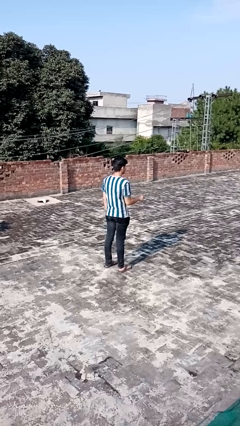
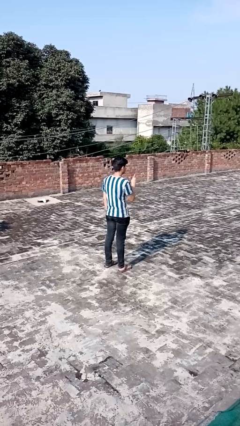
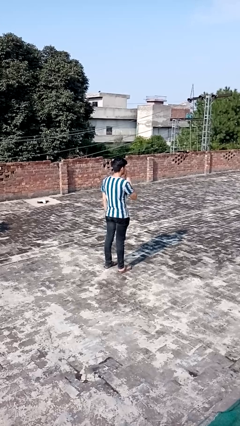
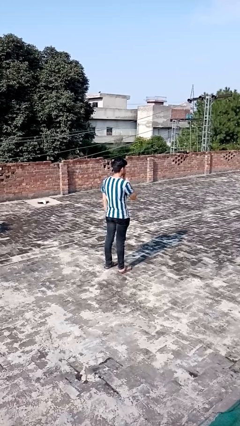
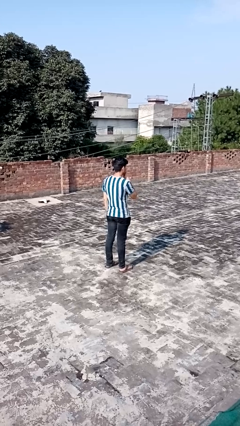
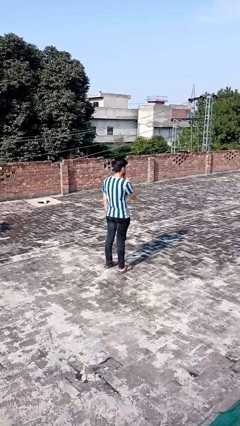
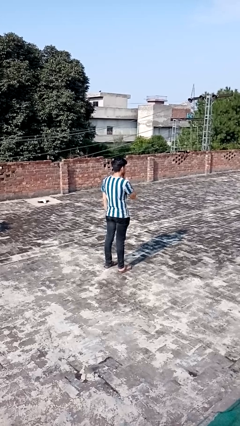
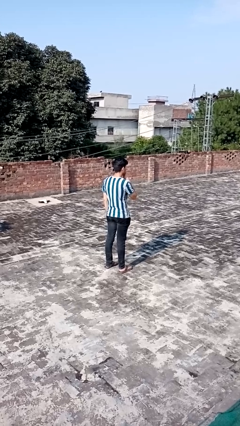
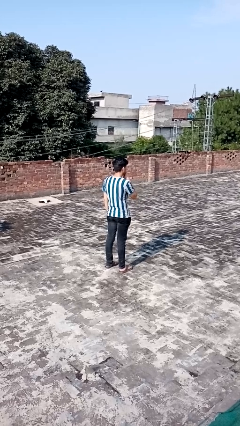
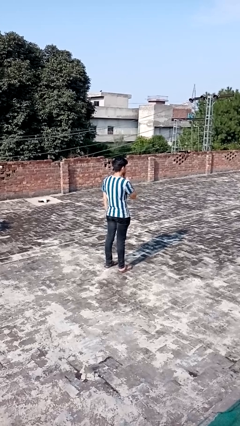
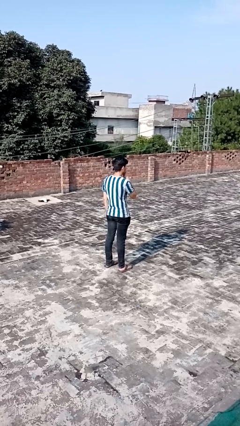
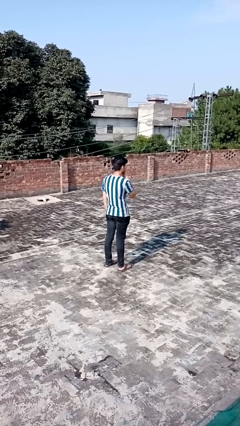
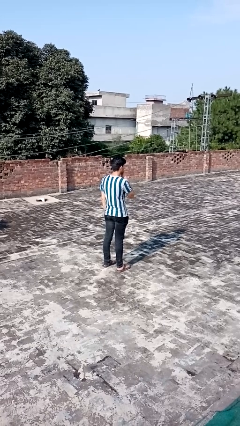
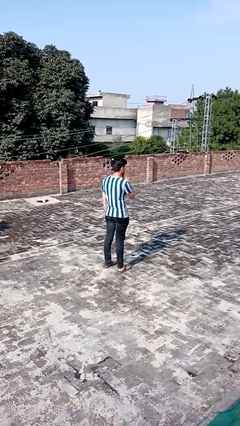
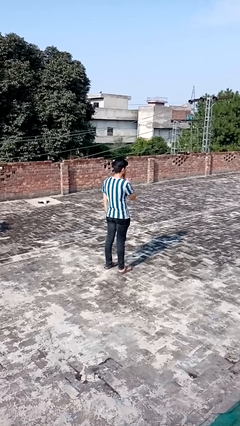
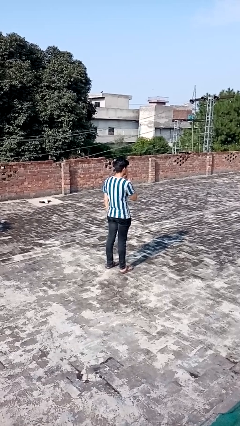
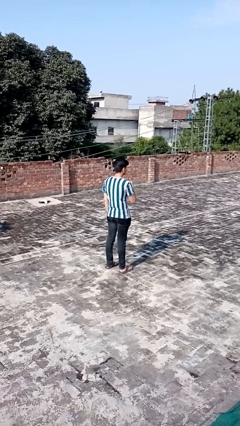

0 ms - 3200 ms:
person gestures be quiet

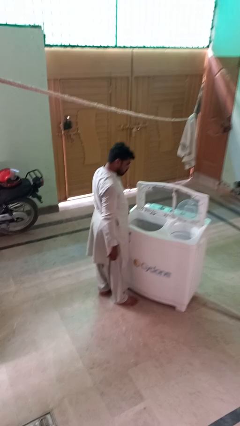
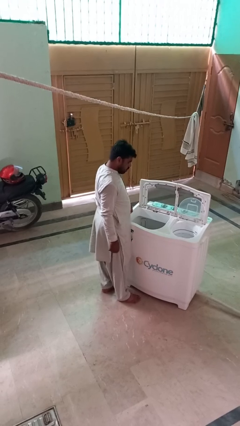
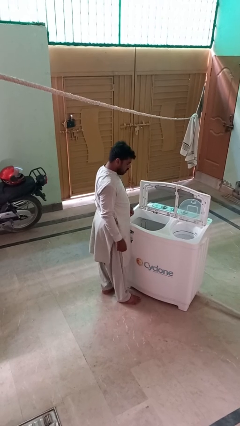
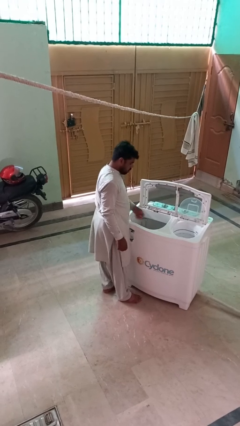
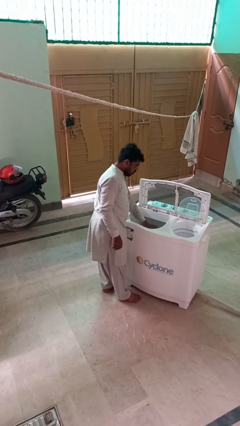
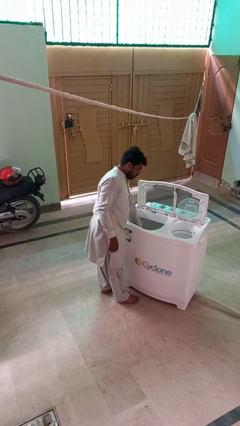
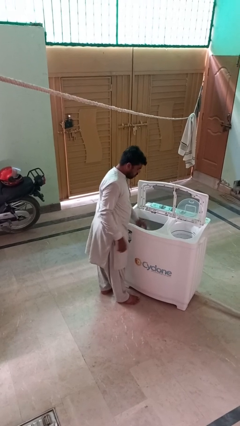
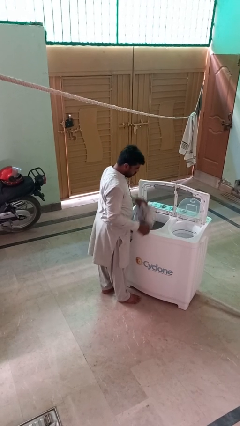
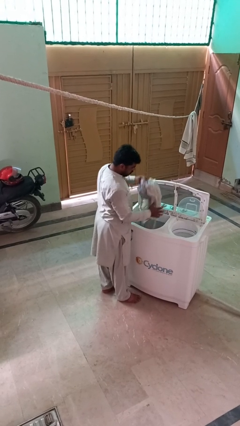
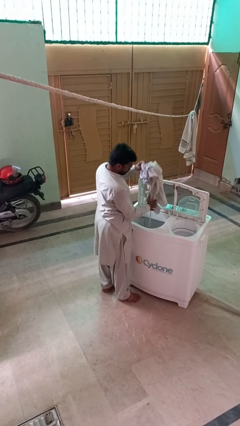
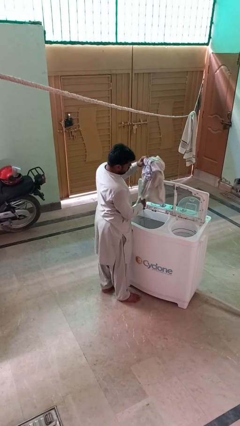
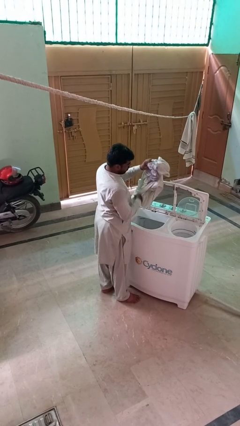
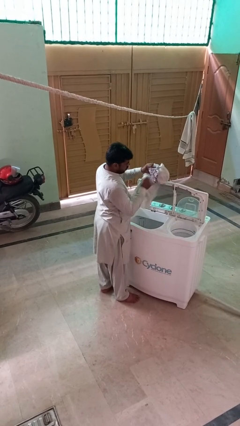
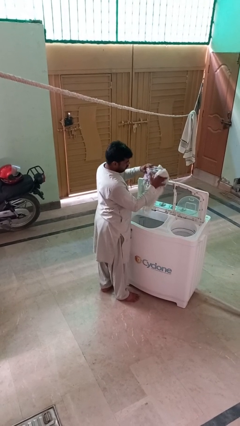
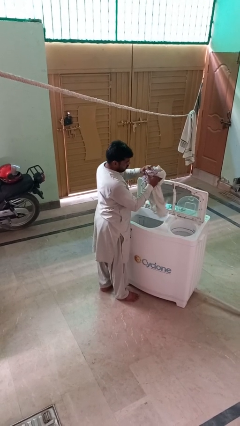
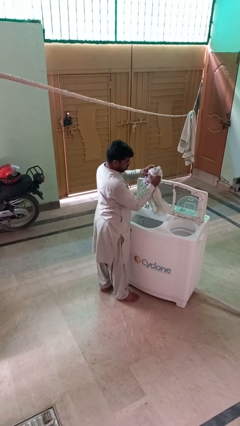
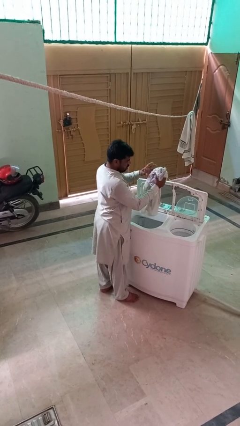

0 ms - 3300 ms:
person unloads clotheswasher

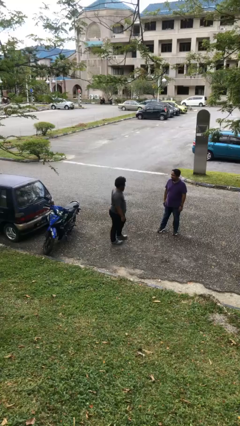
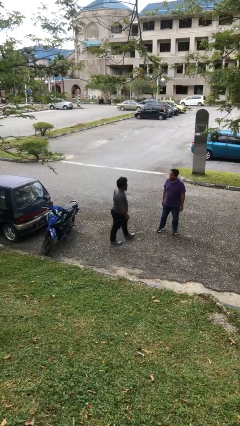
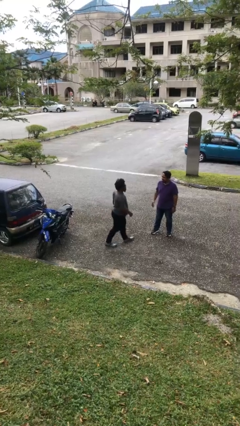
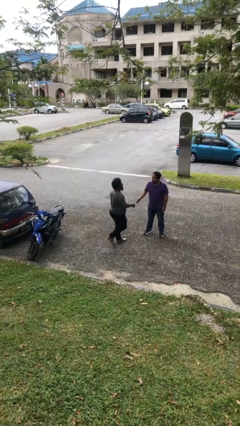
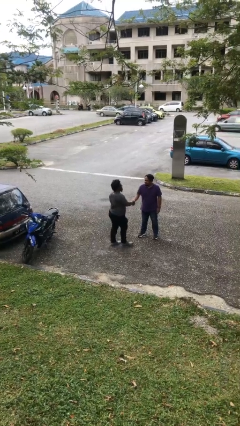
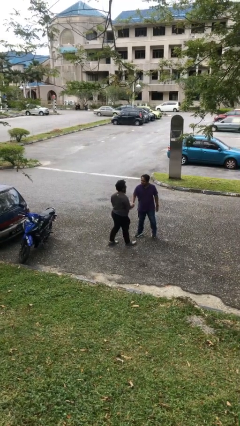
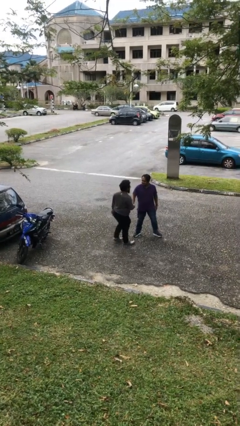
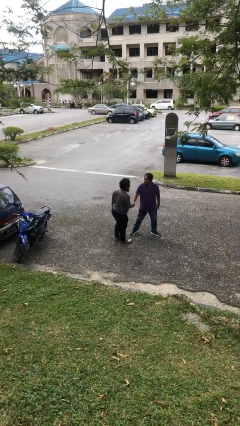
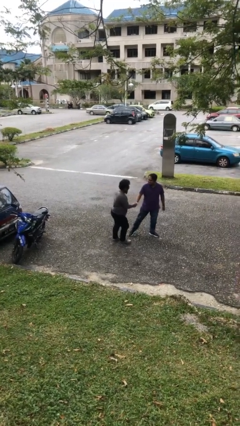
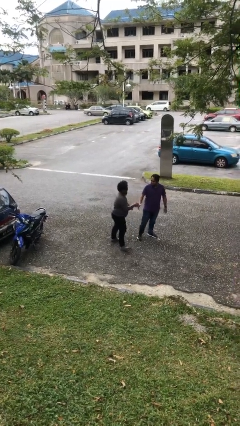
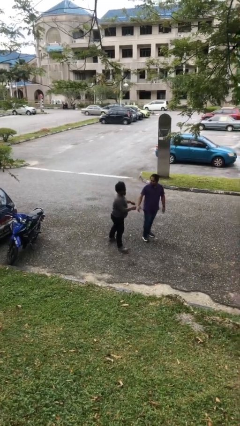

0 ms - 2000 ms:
person shakes hand

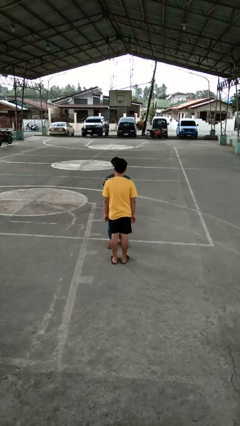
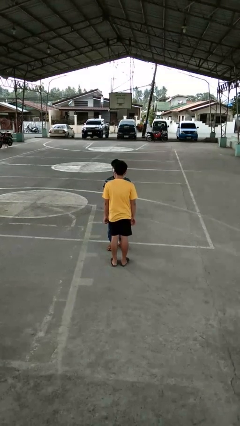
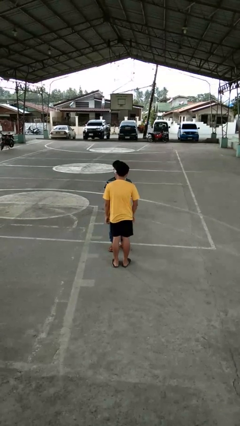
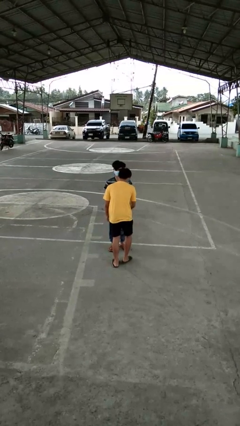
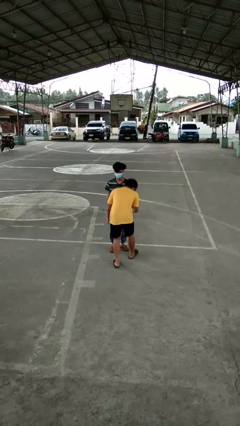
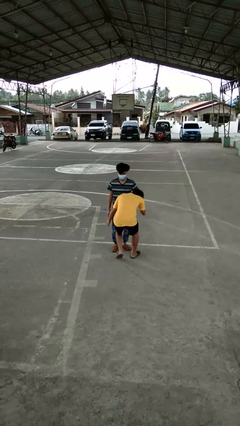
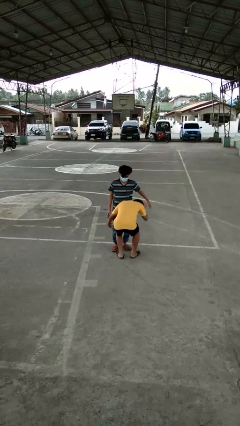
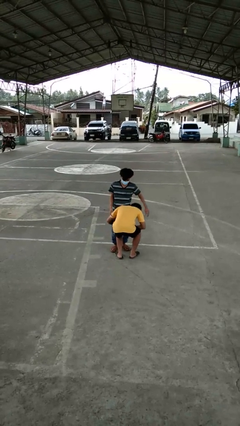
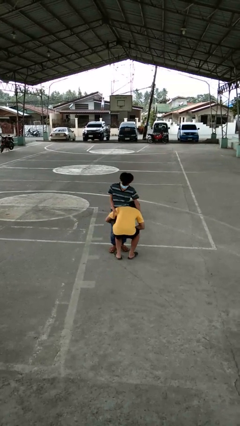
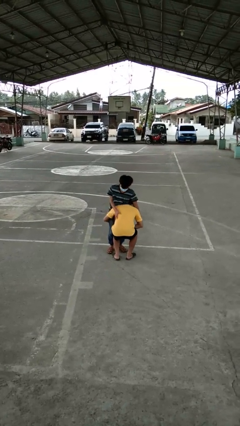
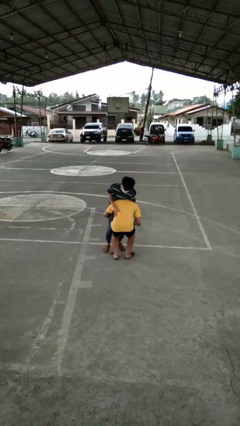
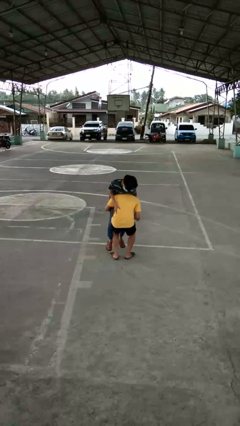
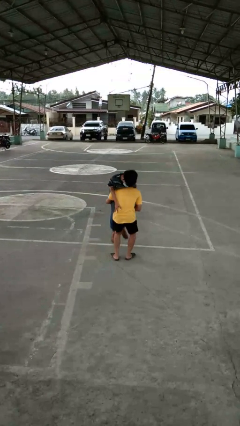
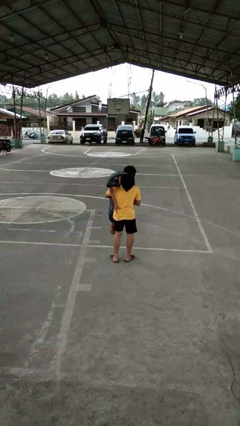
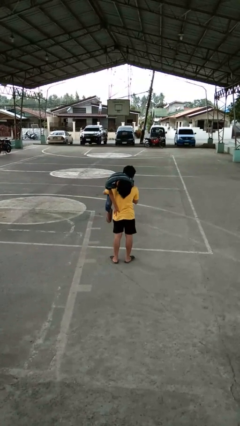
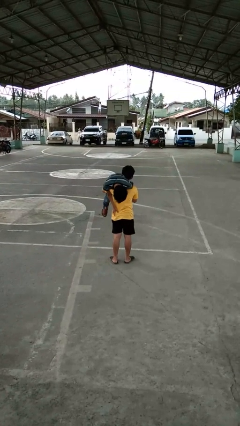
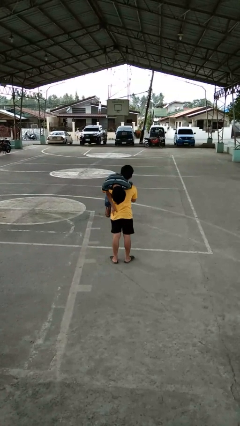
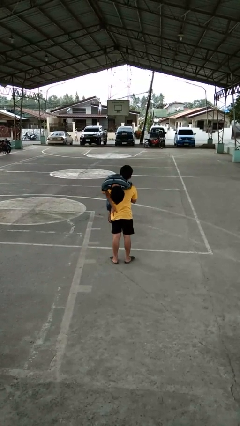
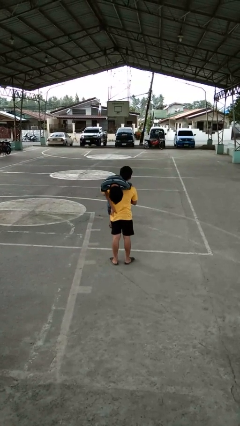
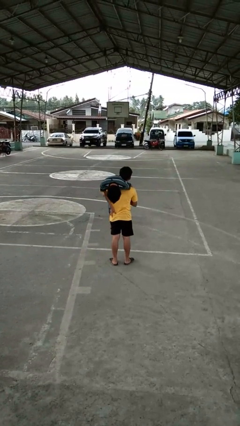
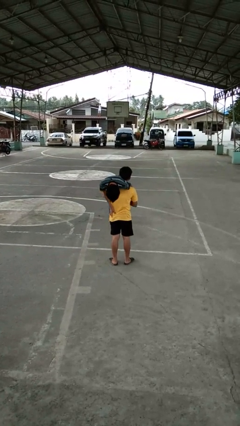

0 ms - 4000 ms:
person carries person over shoulder

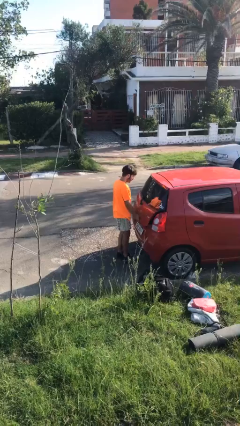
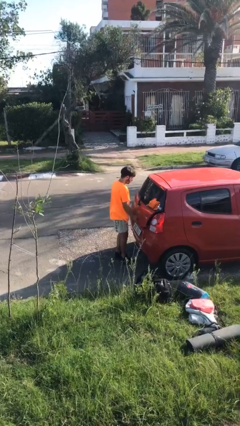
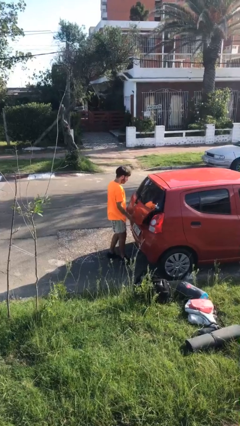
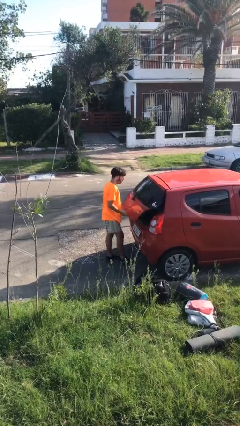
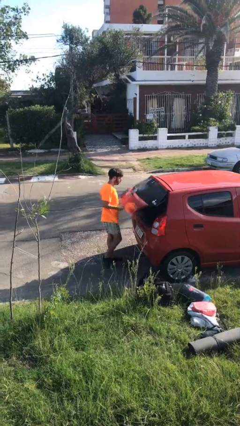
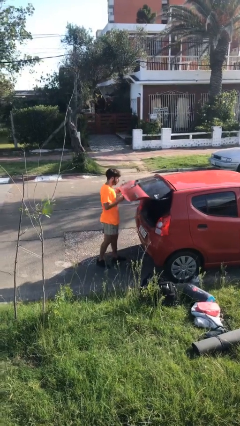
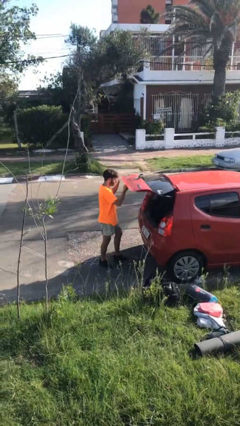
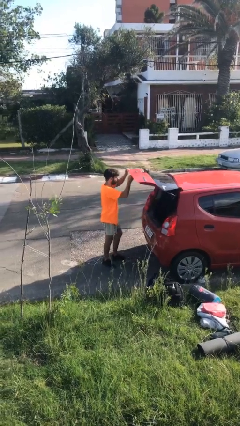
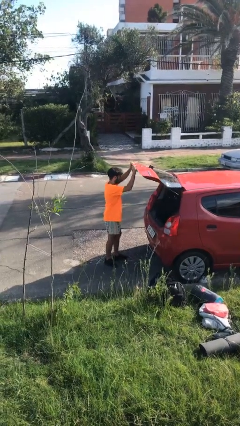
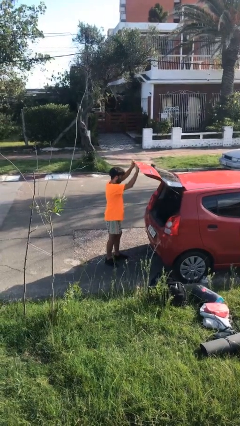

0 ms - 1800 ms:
person opens car trunk

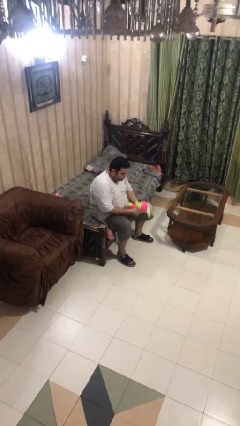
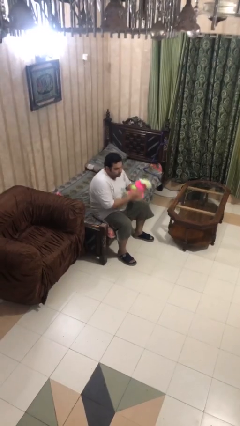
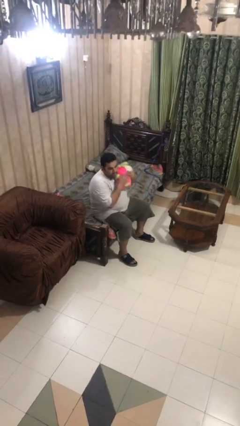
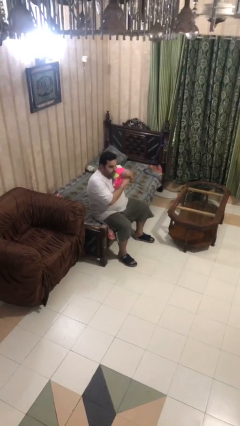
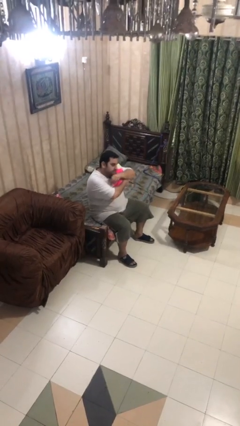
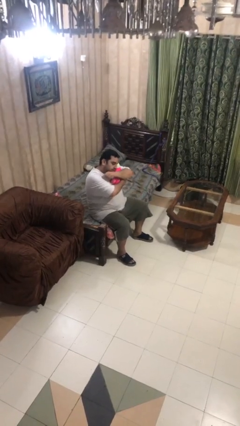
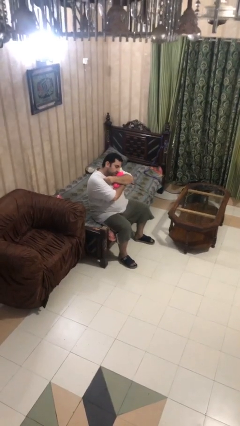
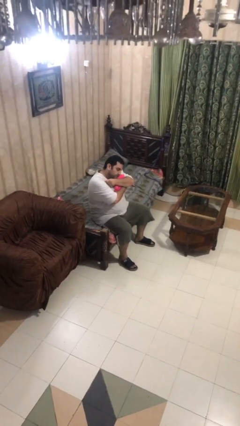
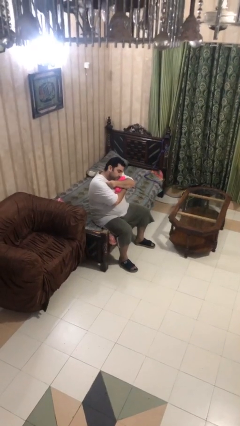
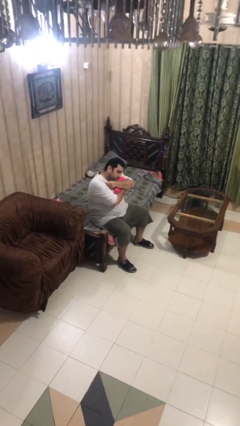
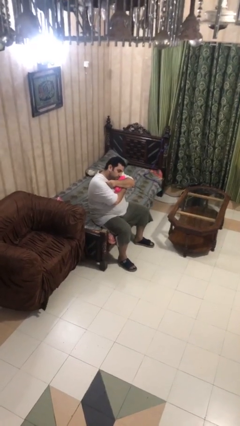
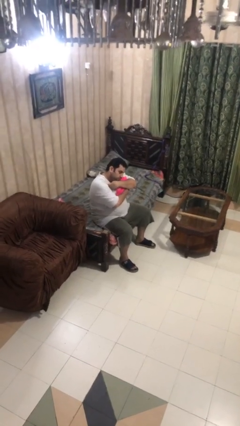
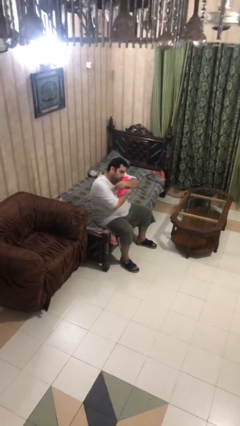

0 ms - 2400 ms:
person hugs stuffed animal

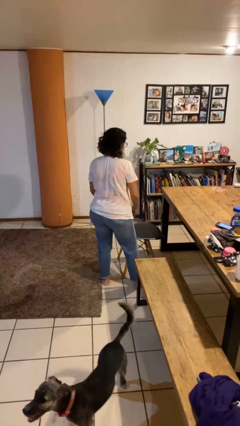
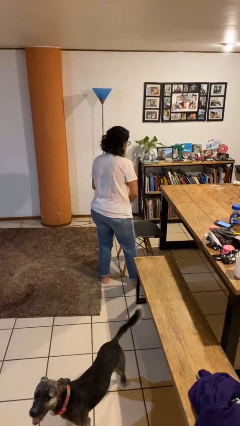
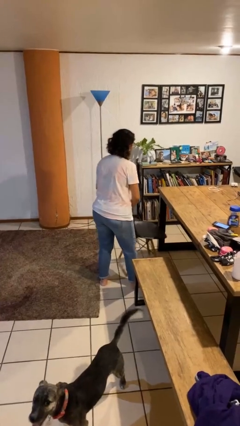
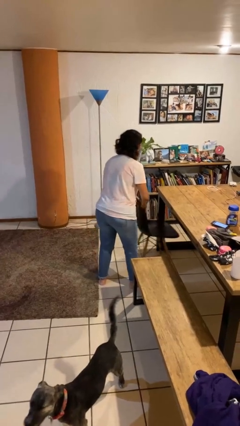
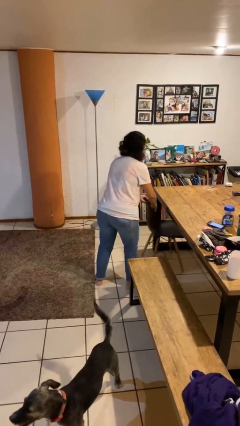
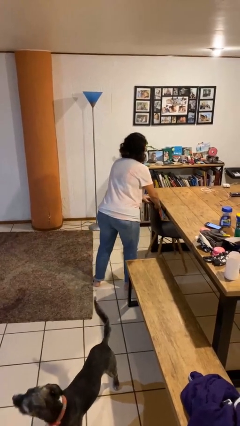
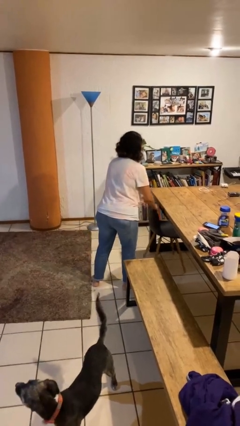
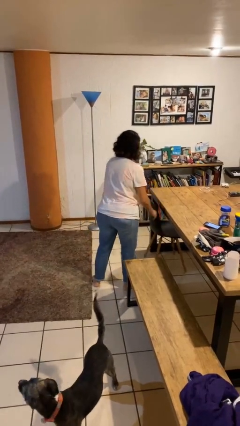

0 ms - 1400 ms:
person pushes in chair
